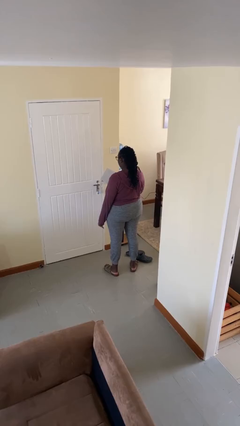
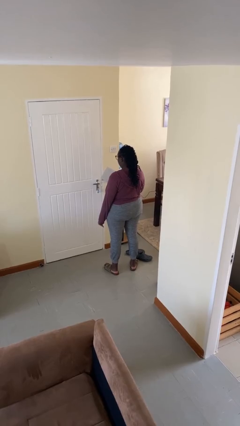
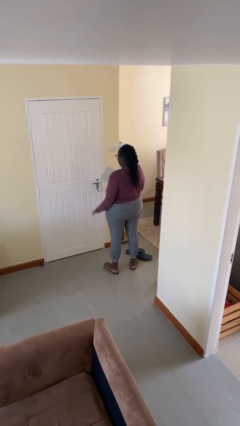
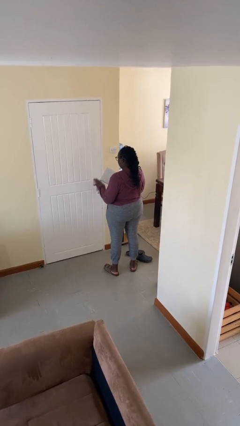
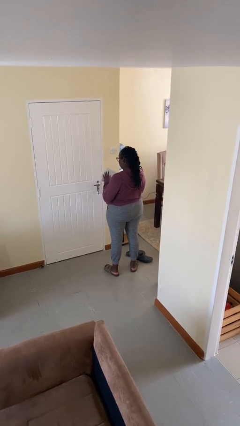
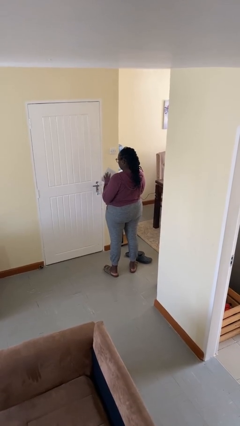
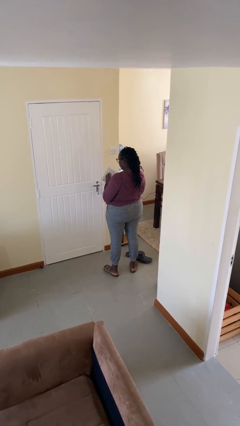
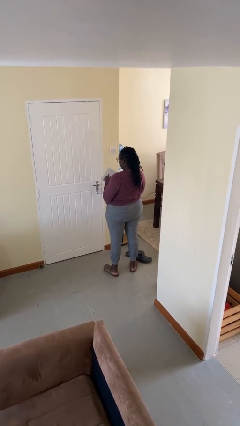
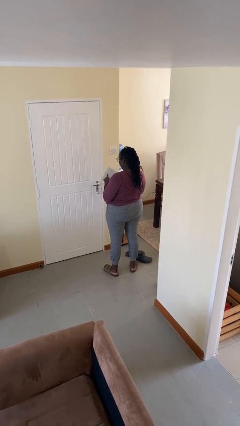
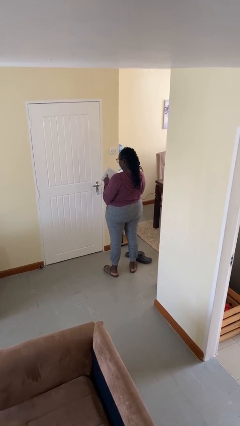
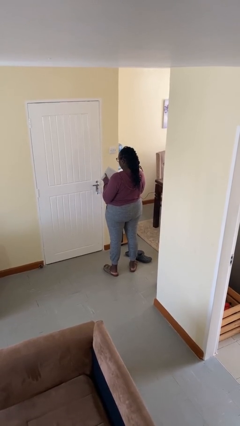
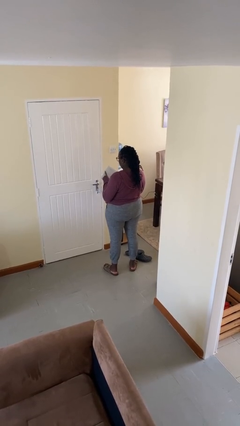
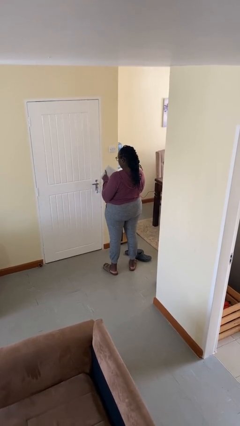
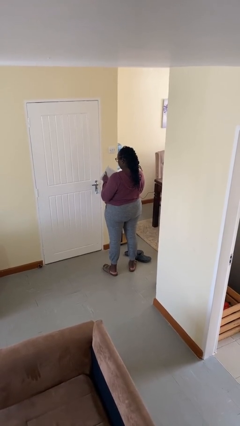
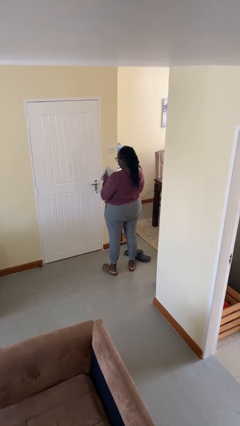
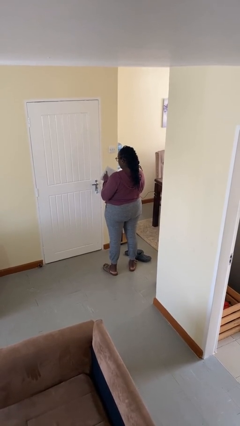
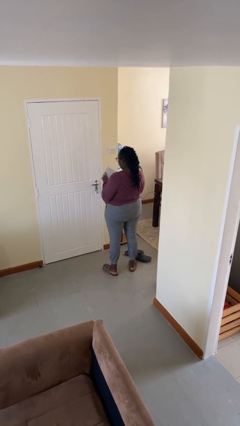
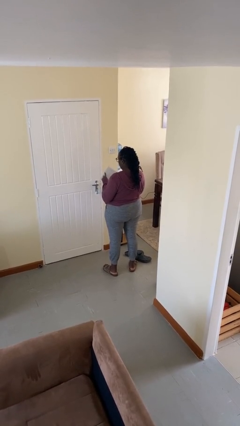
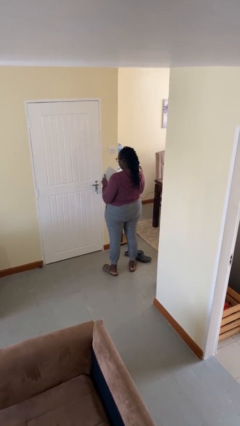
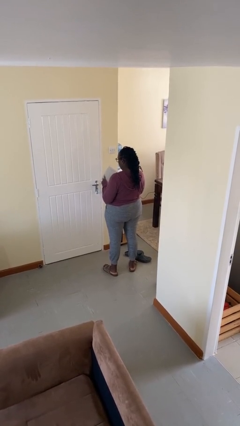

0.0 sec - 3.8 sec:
person taps object with finger

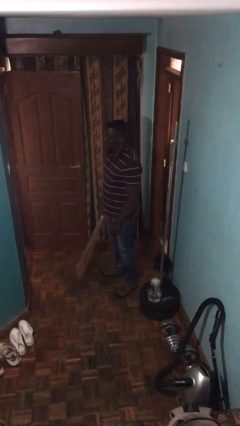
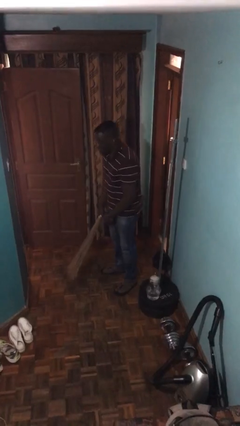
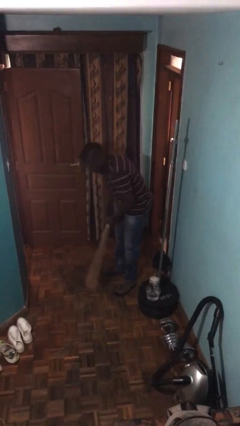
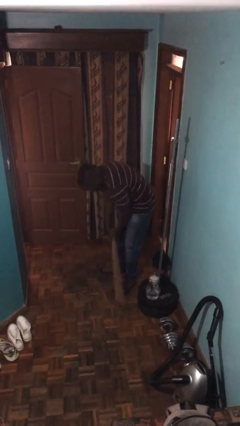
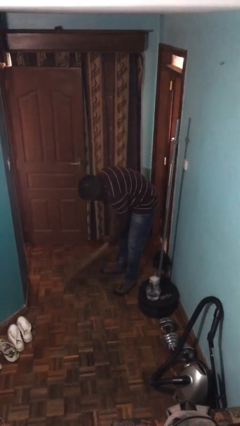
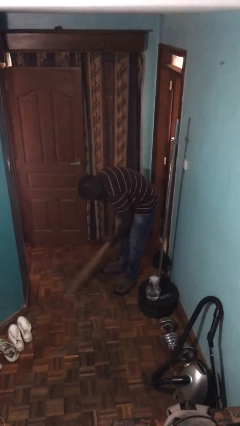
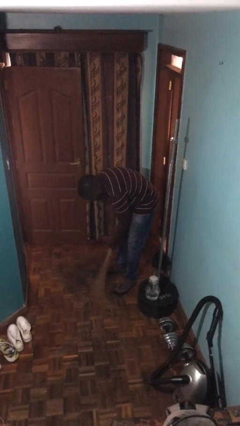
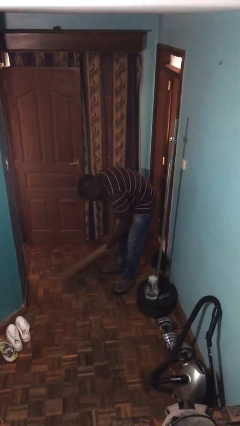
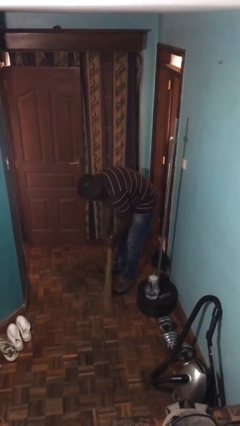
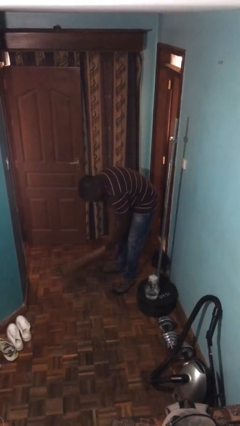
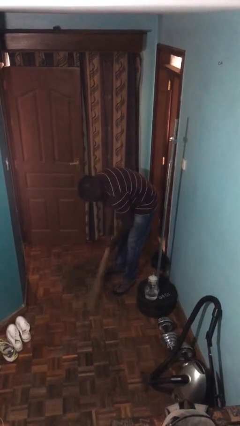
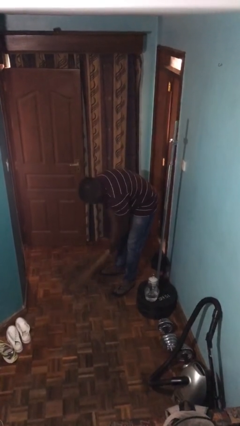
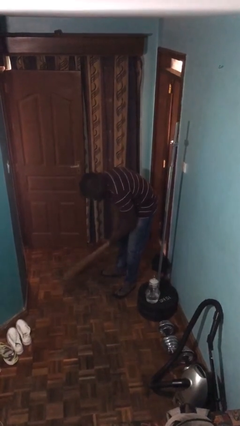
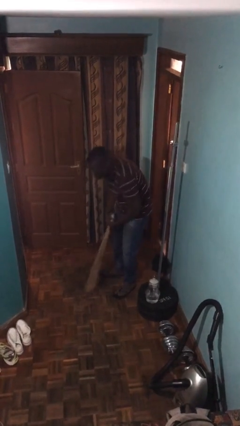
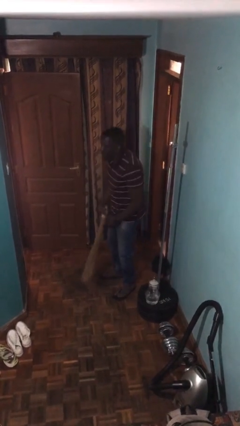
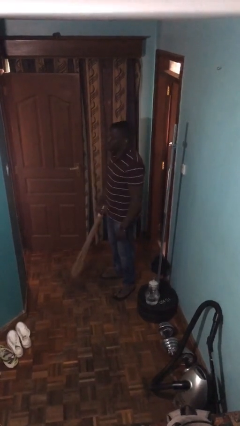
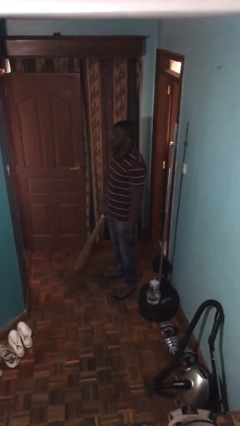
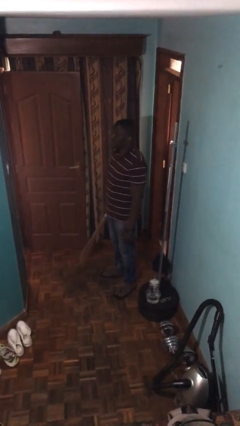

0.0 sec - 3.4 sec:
person sweeps floor

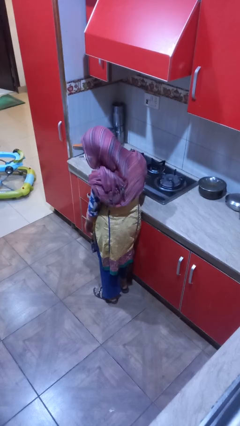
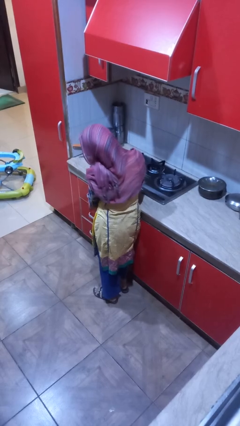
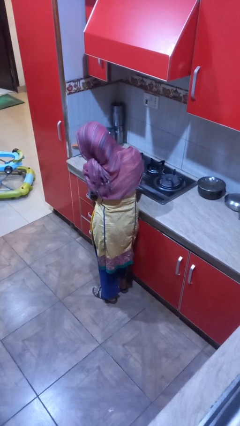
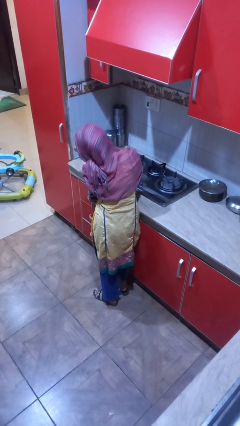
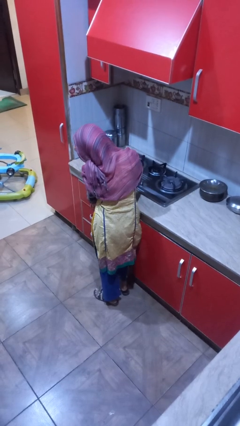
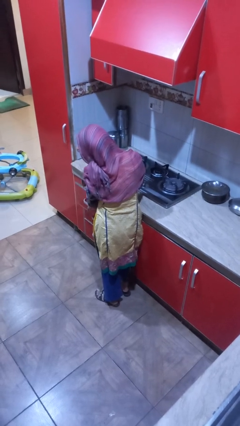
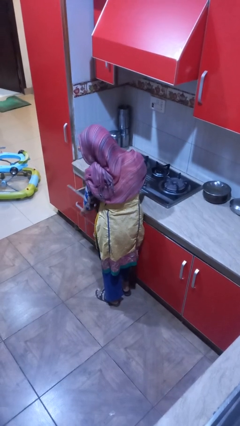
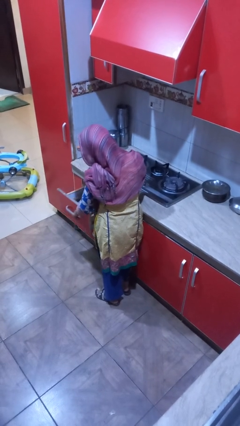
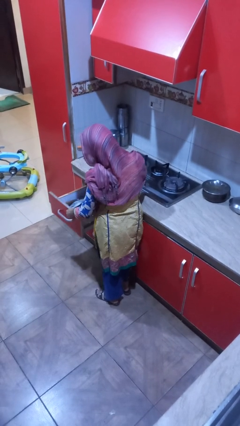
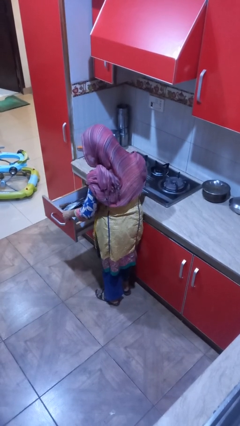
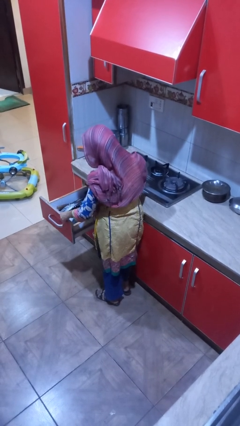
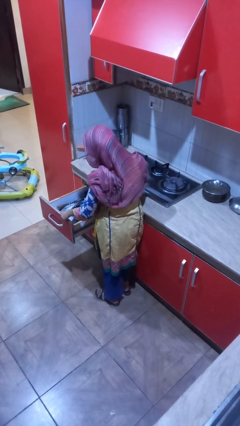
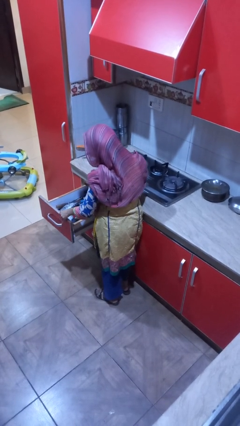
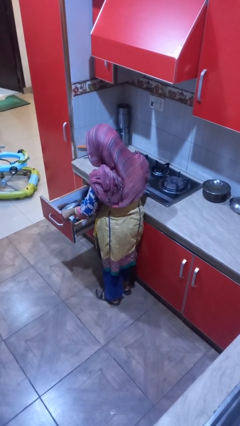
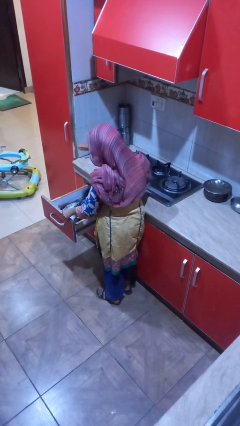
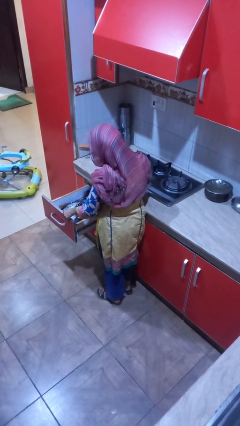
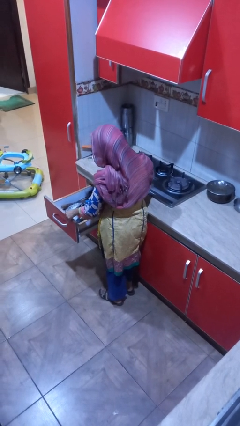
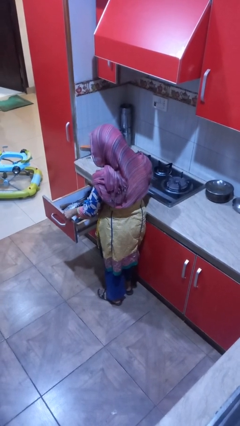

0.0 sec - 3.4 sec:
person opens kitchen drawer

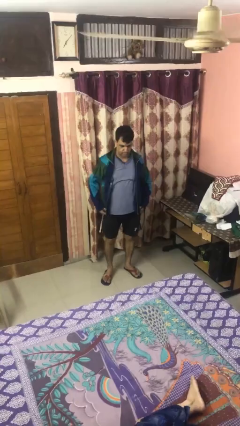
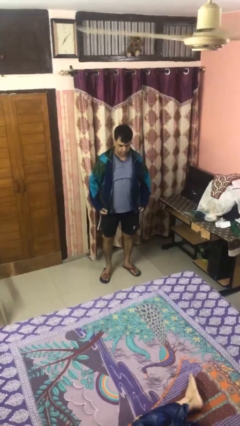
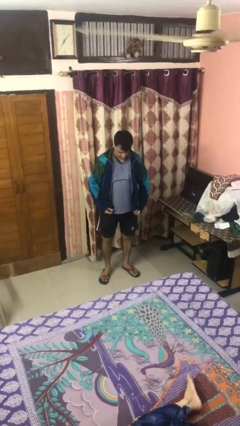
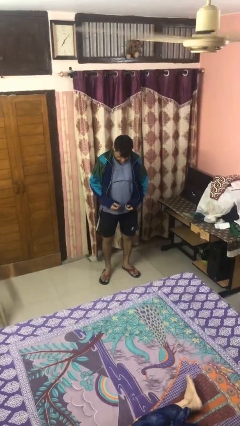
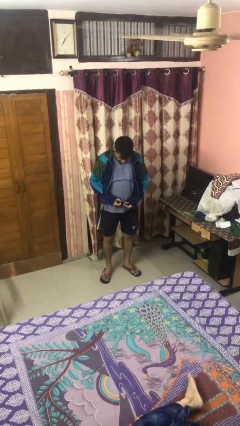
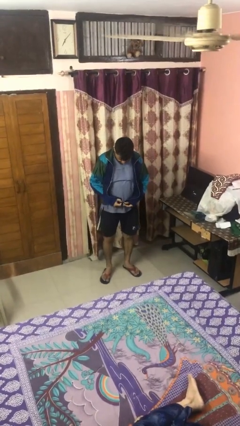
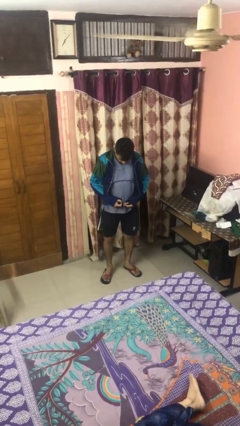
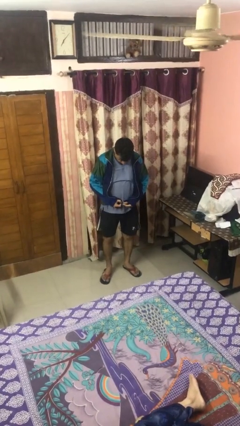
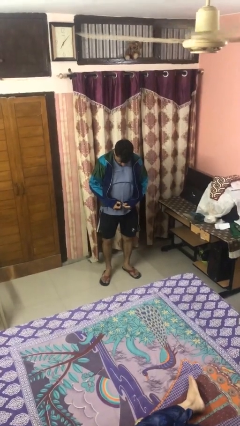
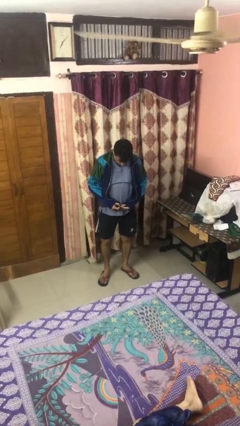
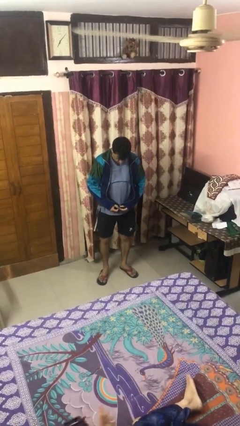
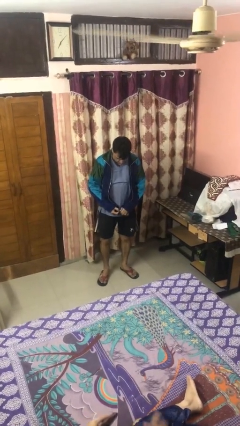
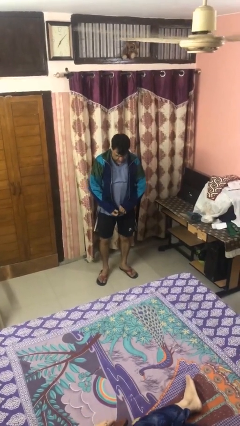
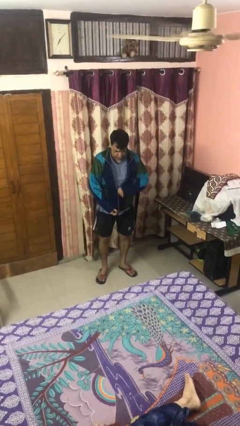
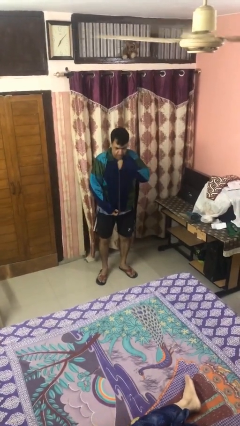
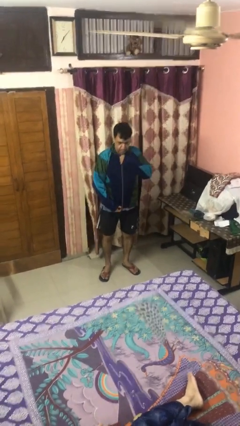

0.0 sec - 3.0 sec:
person zips up jacket

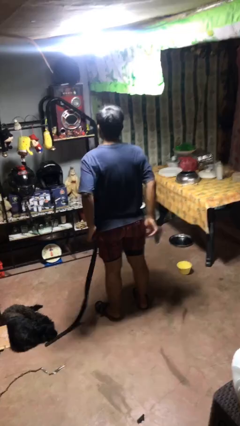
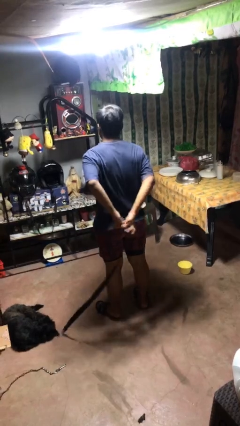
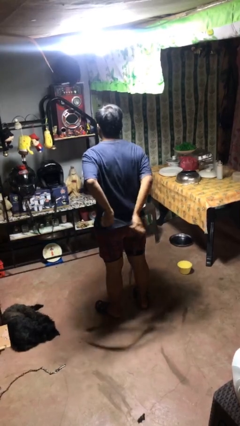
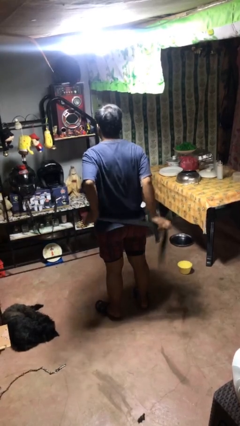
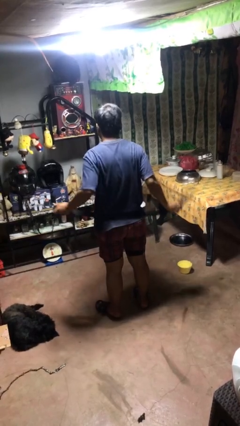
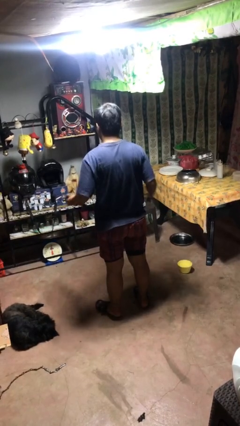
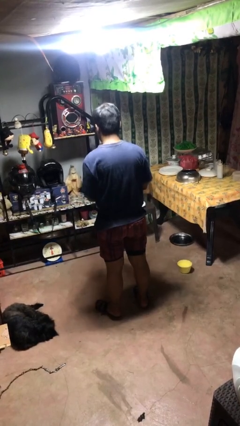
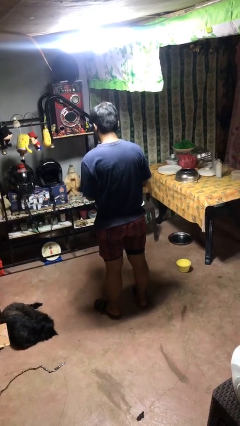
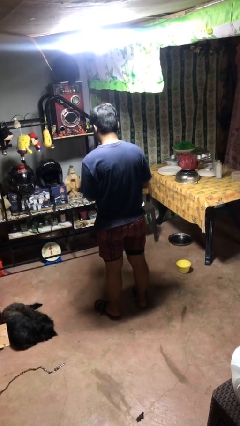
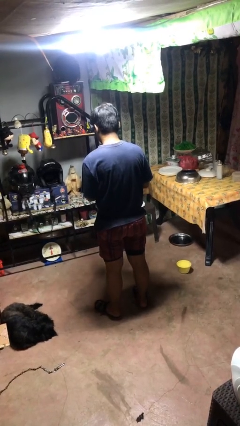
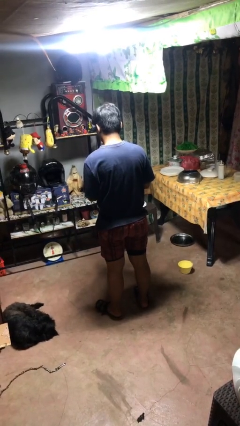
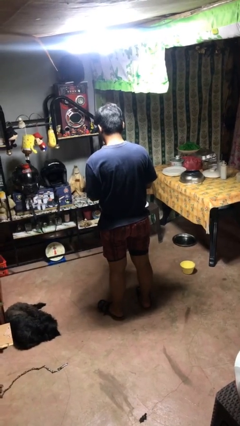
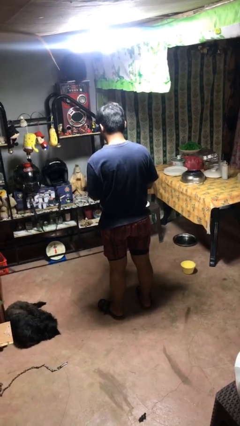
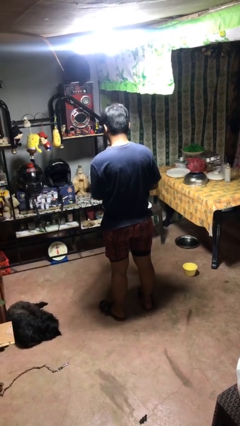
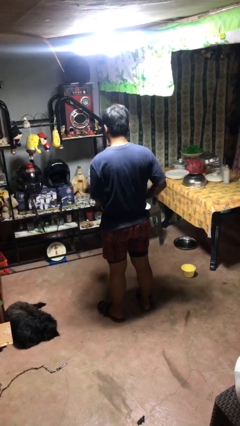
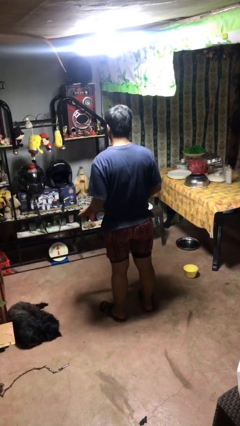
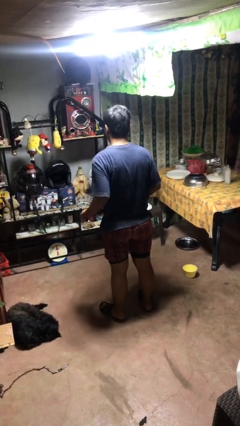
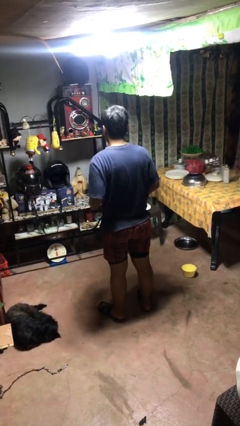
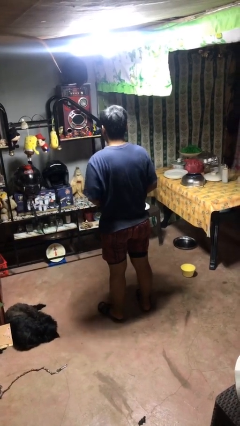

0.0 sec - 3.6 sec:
person puts on belt

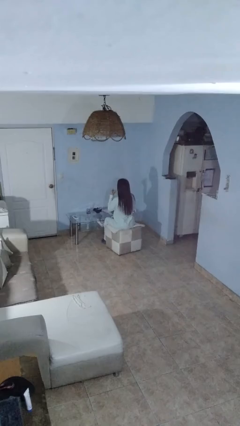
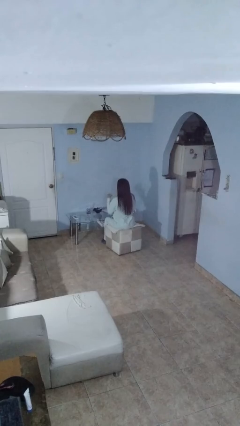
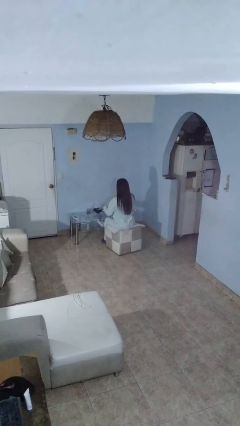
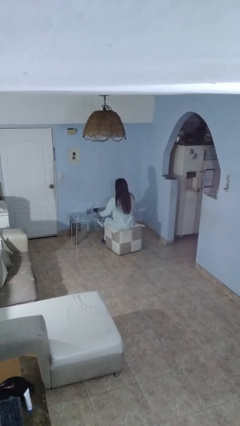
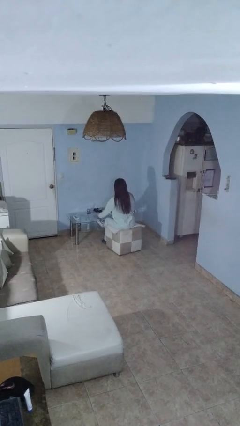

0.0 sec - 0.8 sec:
person puts down object on table
